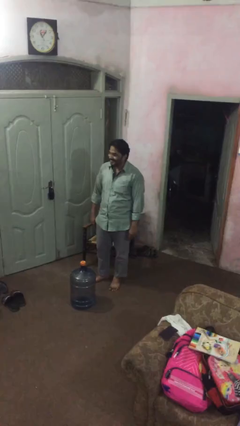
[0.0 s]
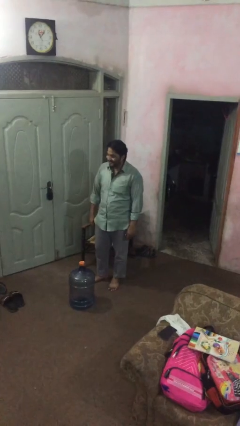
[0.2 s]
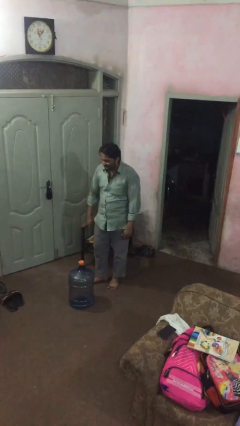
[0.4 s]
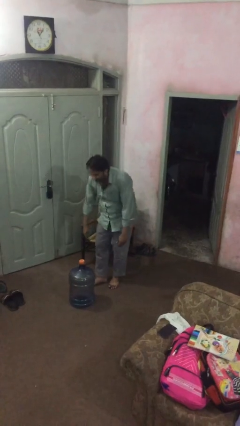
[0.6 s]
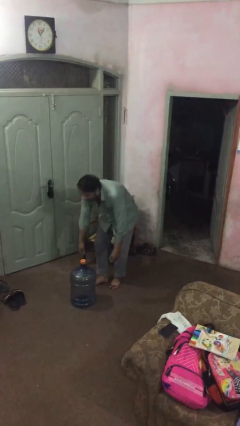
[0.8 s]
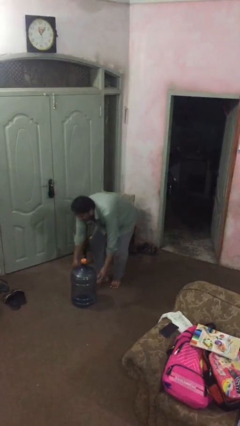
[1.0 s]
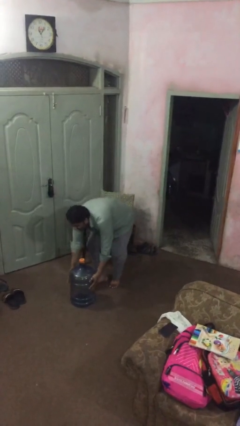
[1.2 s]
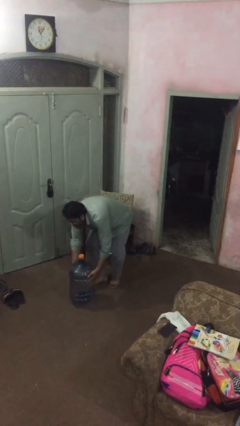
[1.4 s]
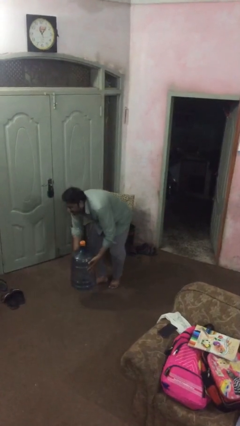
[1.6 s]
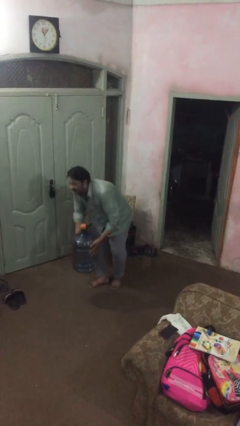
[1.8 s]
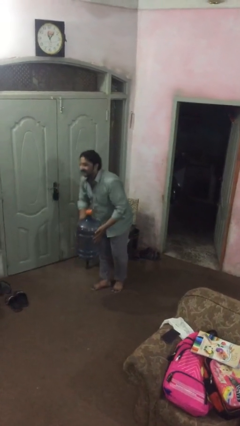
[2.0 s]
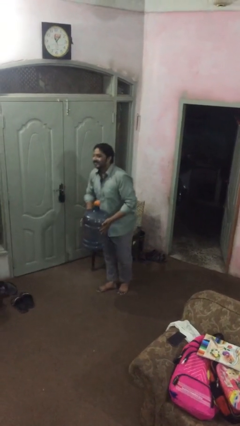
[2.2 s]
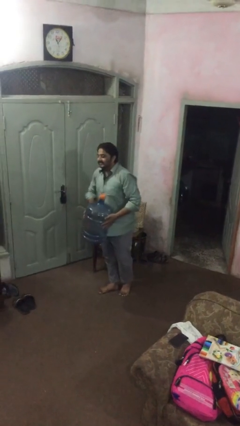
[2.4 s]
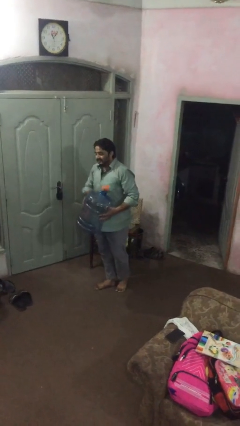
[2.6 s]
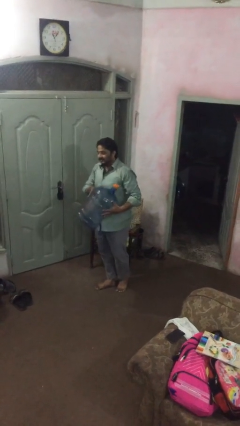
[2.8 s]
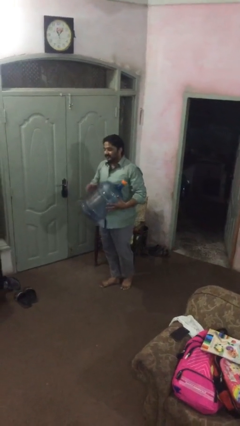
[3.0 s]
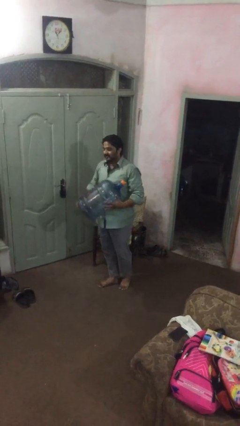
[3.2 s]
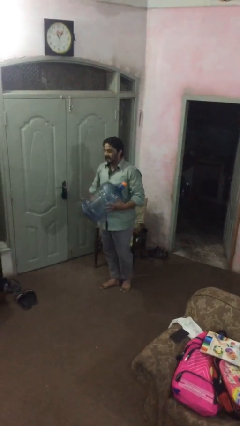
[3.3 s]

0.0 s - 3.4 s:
person picks up object from floor

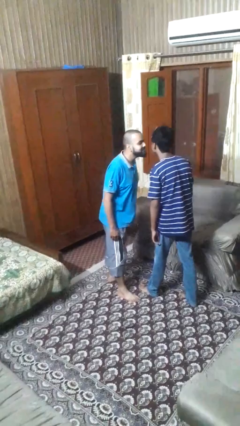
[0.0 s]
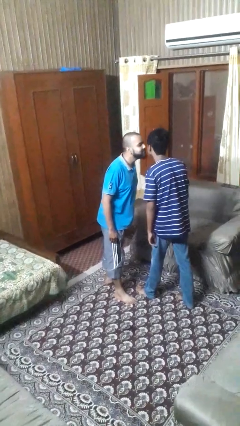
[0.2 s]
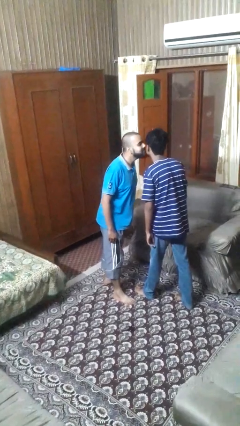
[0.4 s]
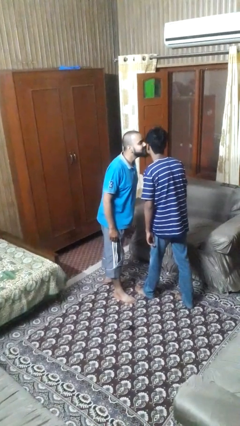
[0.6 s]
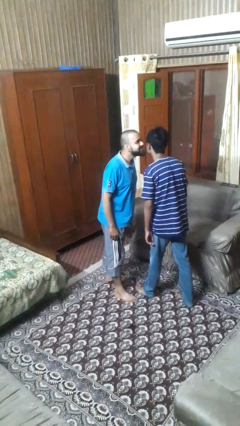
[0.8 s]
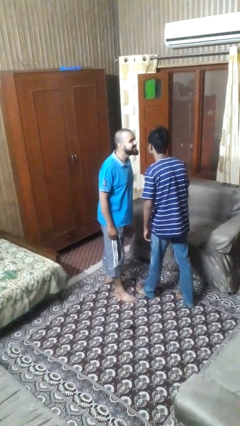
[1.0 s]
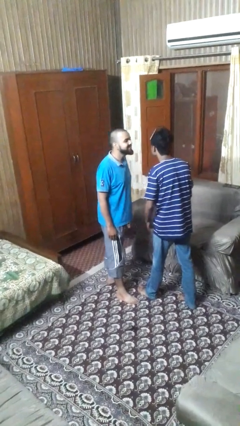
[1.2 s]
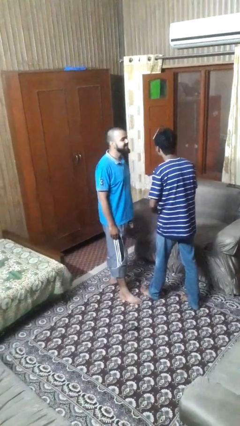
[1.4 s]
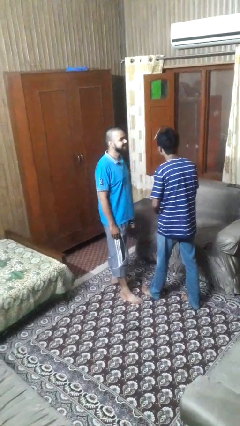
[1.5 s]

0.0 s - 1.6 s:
person kisses cheek of person

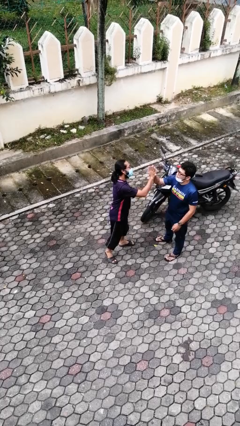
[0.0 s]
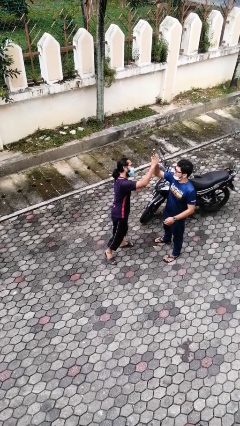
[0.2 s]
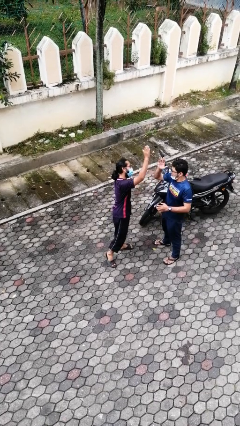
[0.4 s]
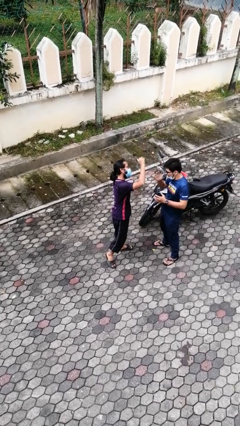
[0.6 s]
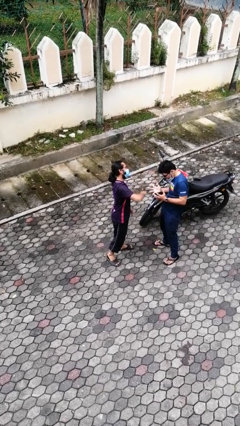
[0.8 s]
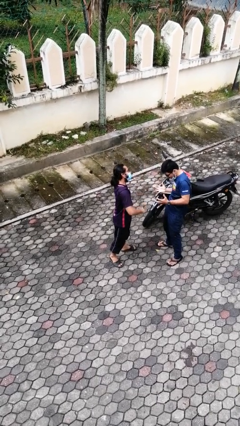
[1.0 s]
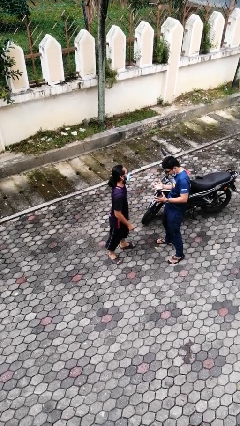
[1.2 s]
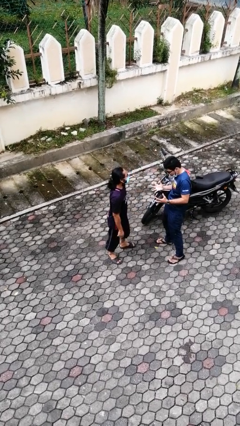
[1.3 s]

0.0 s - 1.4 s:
person highfives hand

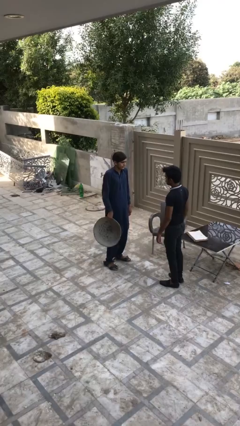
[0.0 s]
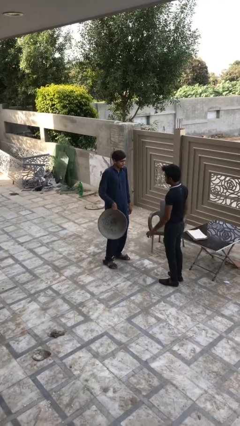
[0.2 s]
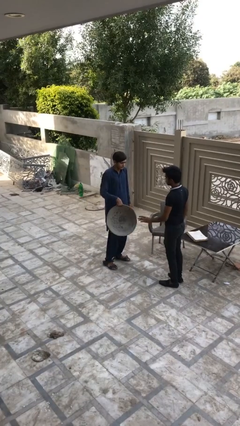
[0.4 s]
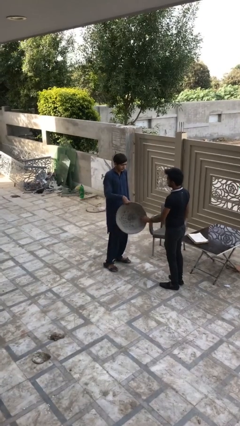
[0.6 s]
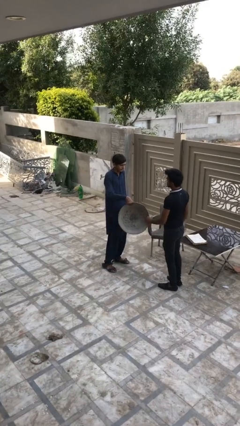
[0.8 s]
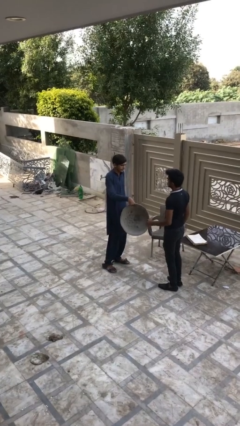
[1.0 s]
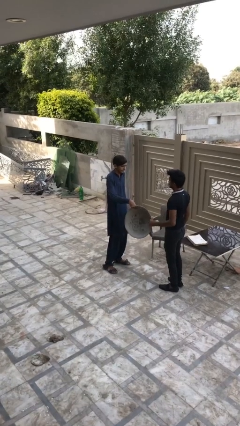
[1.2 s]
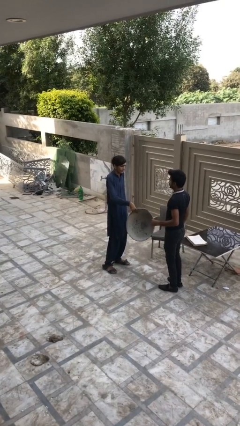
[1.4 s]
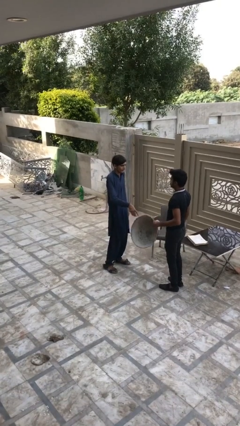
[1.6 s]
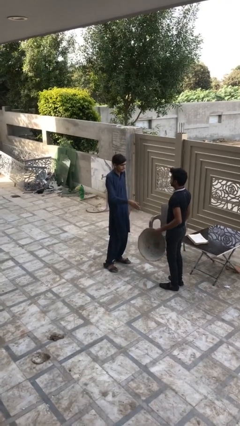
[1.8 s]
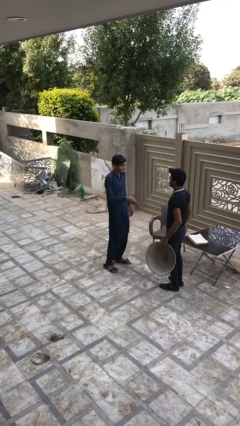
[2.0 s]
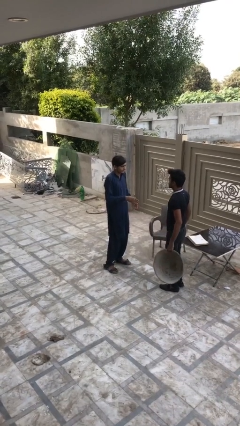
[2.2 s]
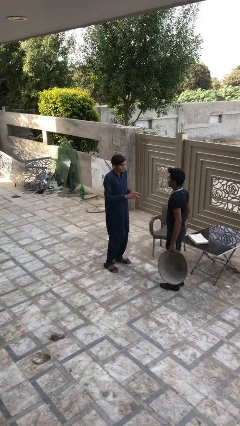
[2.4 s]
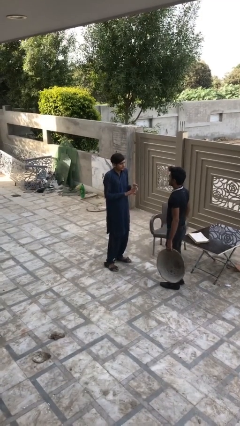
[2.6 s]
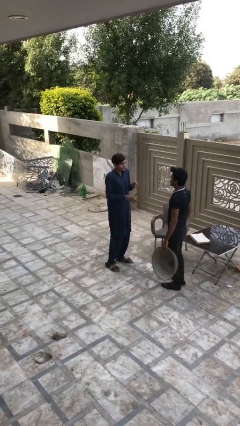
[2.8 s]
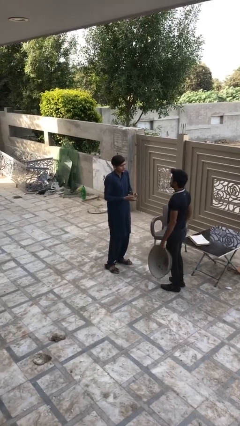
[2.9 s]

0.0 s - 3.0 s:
person transfers object to person

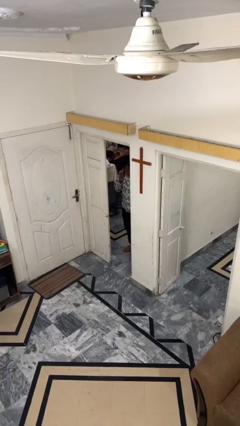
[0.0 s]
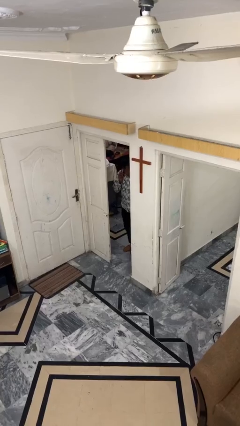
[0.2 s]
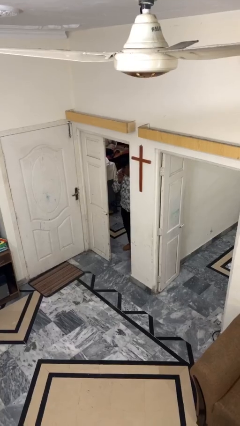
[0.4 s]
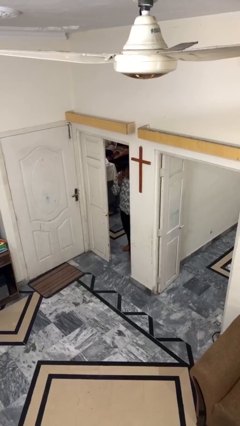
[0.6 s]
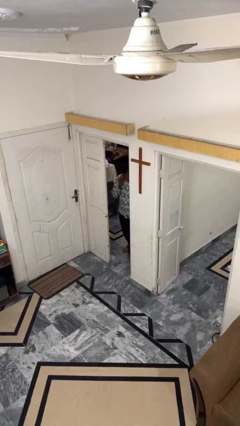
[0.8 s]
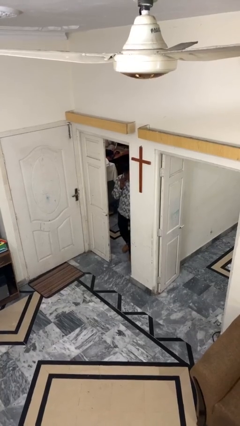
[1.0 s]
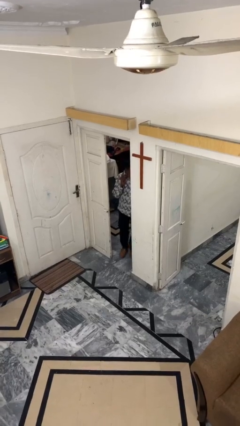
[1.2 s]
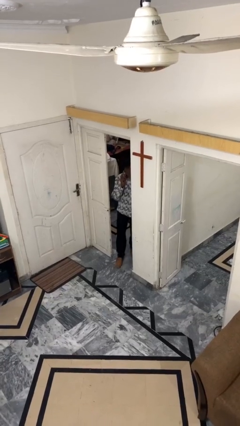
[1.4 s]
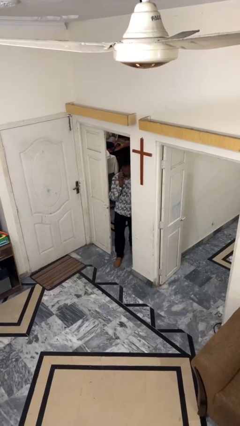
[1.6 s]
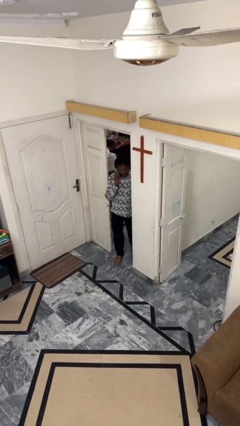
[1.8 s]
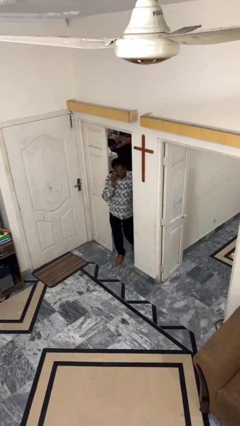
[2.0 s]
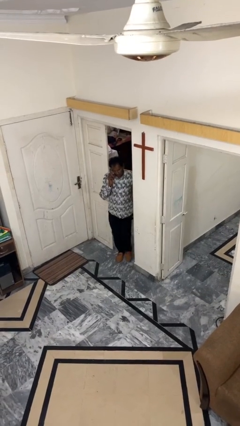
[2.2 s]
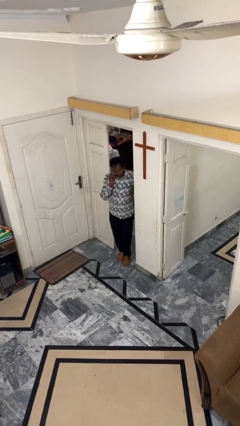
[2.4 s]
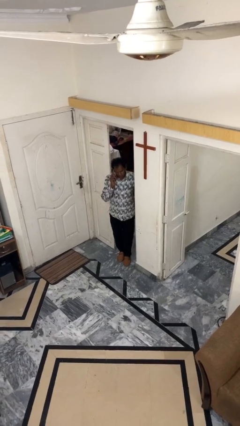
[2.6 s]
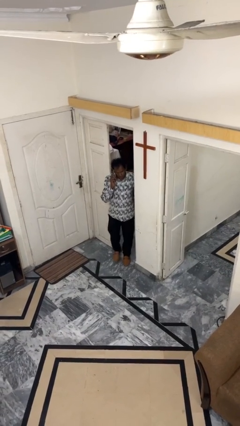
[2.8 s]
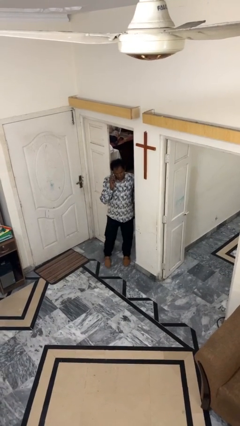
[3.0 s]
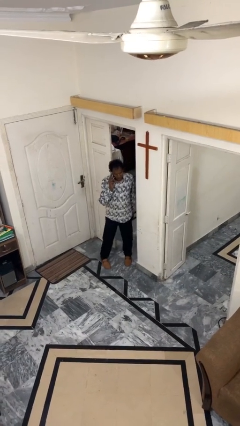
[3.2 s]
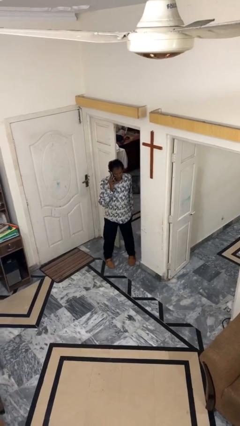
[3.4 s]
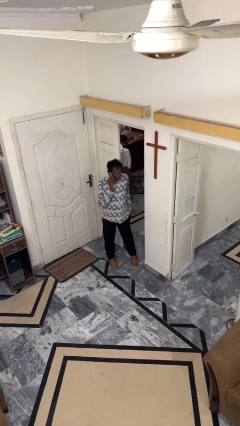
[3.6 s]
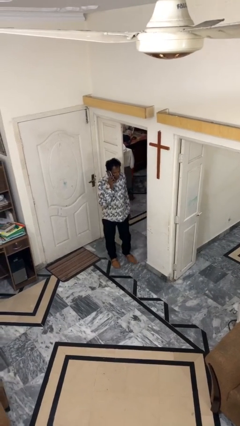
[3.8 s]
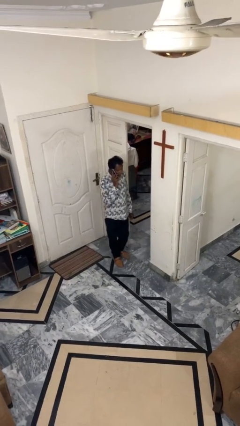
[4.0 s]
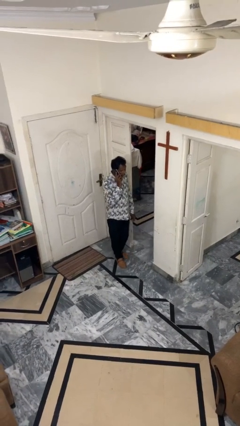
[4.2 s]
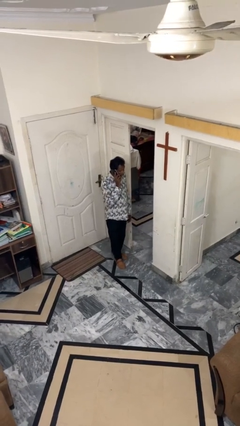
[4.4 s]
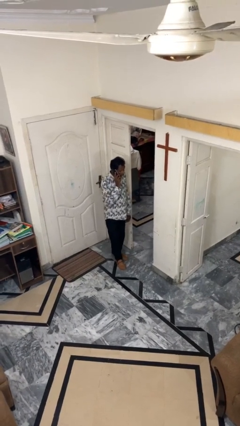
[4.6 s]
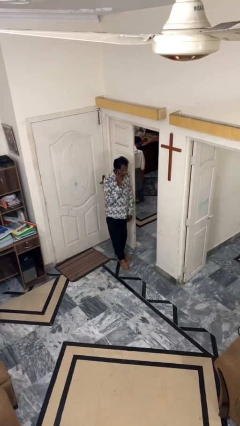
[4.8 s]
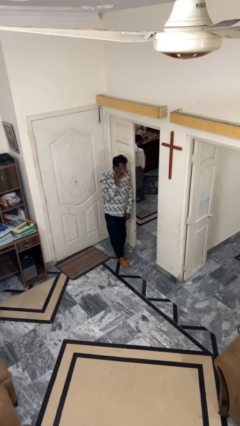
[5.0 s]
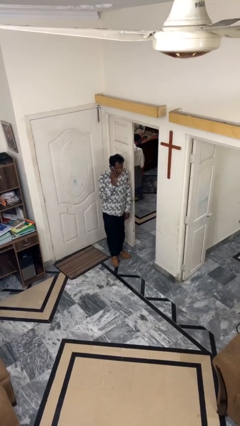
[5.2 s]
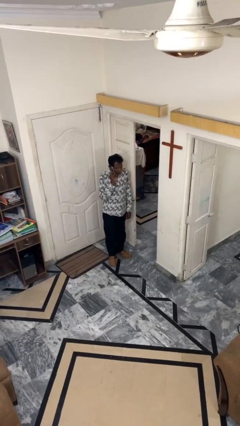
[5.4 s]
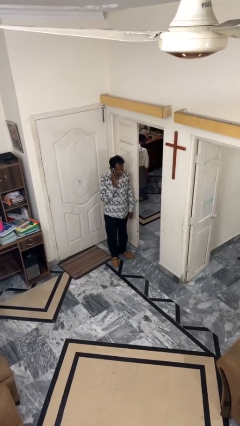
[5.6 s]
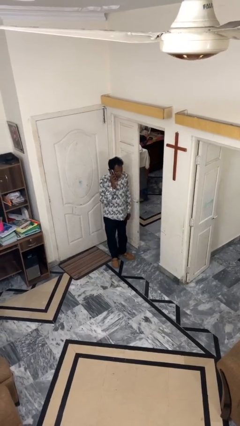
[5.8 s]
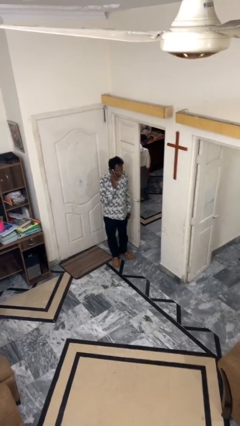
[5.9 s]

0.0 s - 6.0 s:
person enters scene through structure

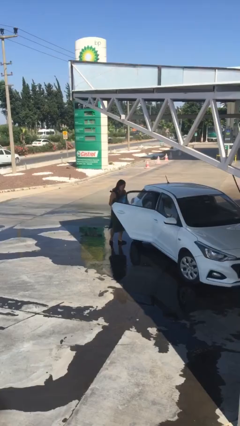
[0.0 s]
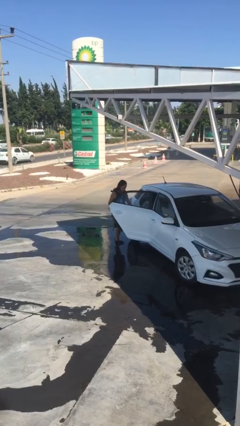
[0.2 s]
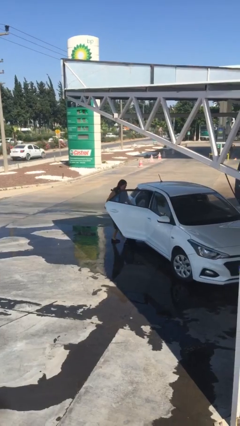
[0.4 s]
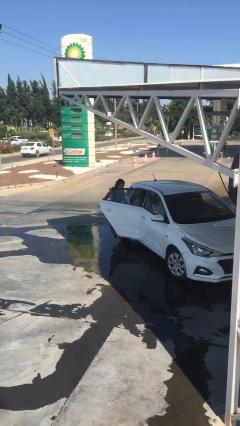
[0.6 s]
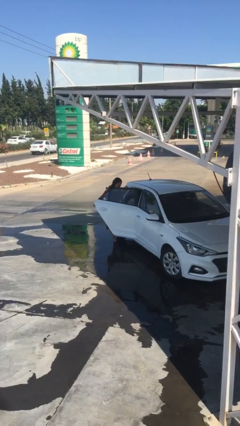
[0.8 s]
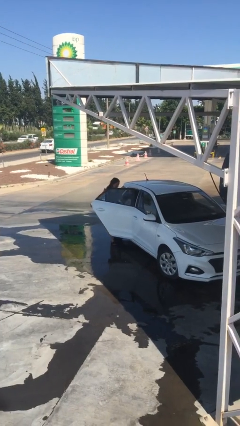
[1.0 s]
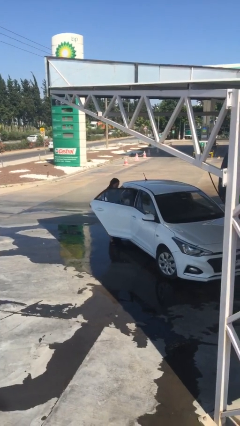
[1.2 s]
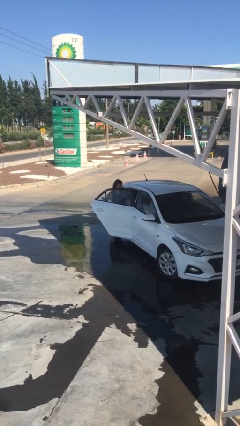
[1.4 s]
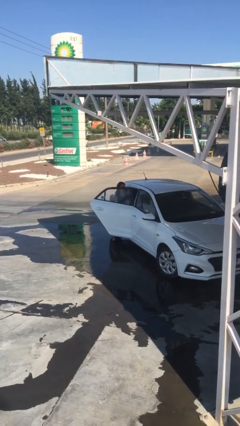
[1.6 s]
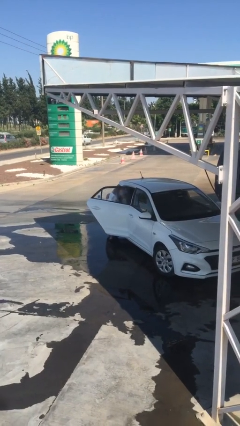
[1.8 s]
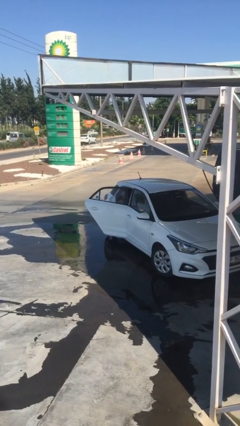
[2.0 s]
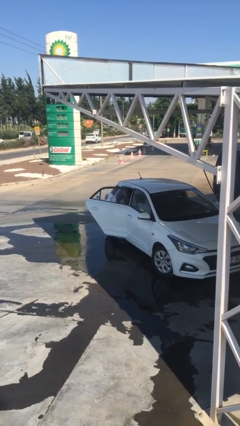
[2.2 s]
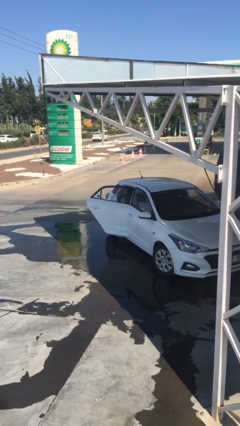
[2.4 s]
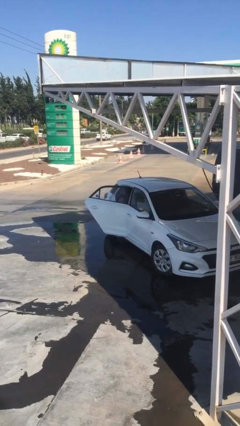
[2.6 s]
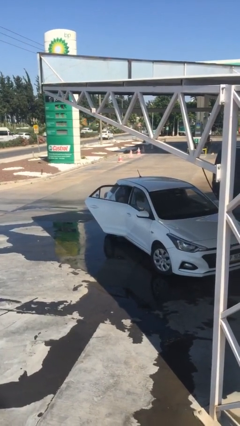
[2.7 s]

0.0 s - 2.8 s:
person enters car
